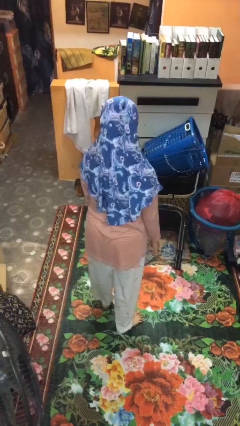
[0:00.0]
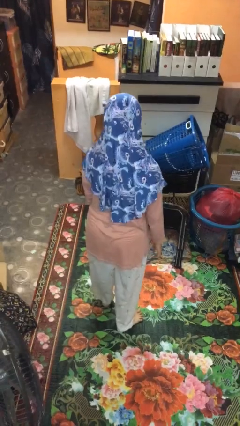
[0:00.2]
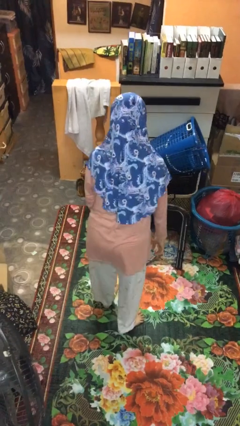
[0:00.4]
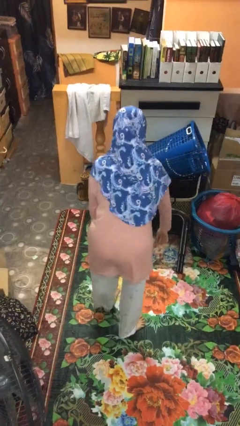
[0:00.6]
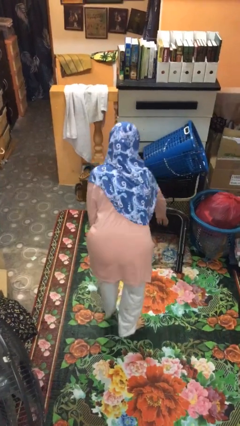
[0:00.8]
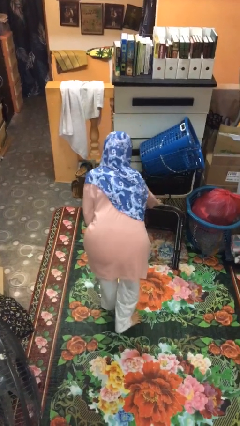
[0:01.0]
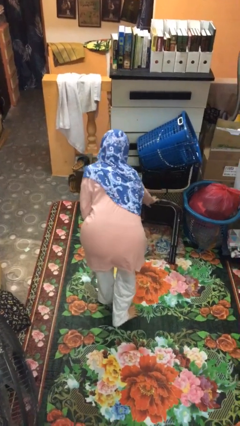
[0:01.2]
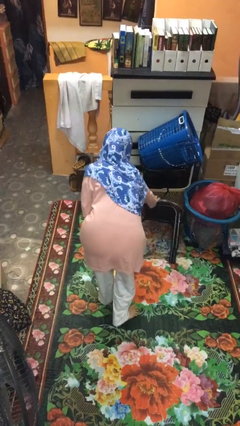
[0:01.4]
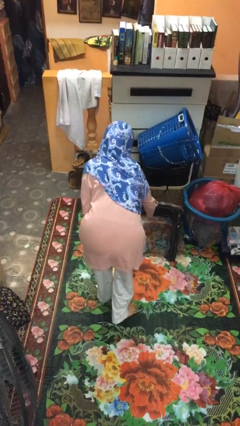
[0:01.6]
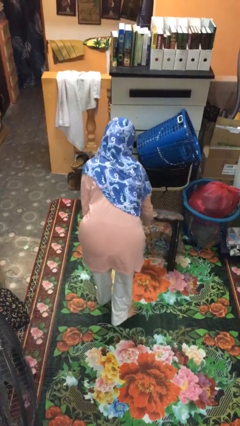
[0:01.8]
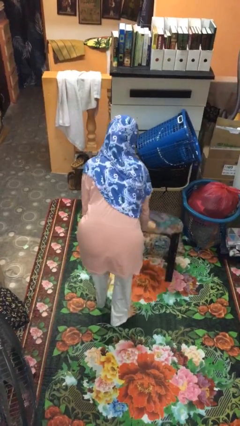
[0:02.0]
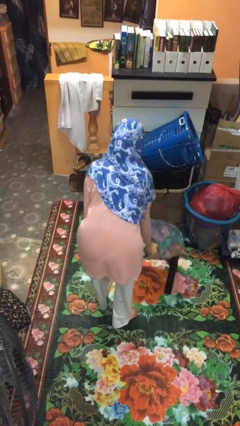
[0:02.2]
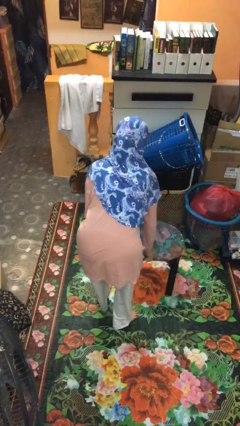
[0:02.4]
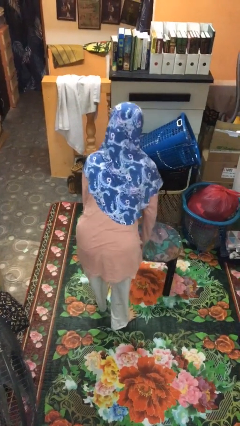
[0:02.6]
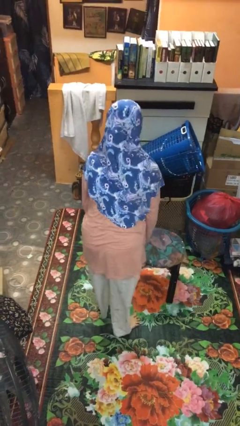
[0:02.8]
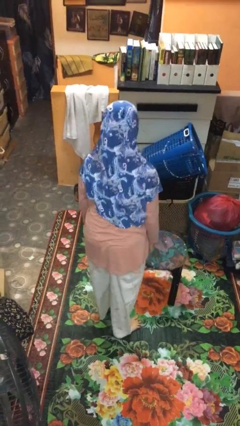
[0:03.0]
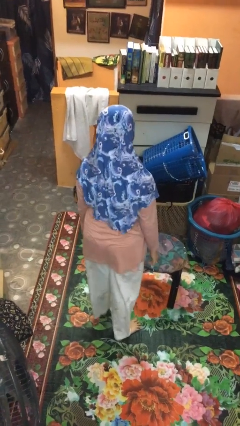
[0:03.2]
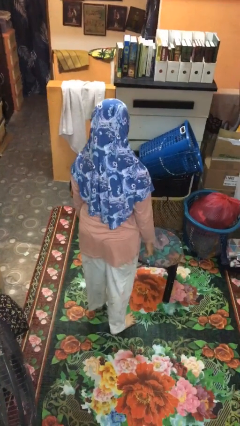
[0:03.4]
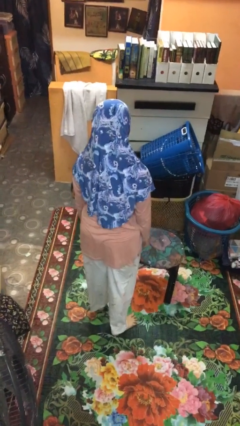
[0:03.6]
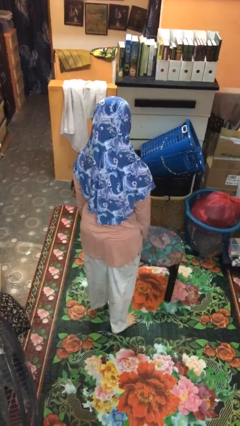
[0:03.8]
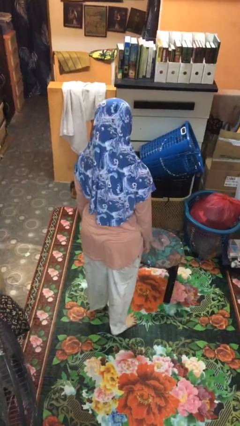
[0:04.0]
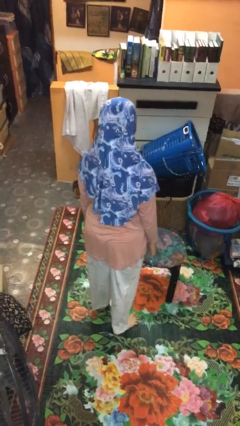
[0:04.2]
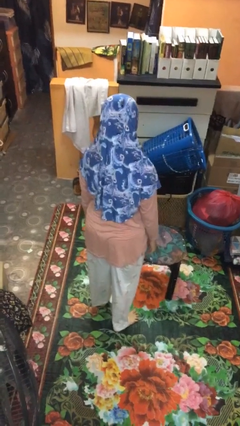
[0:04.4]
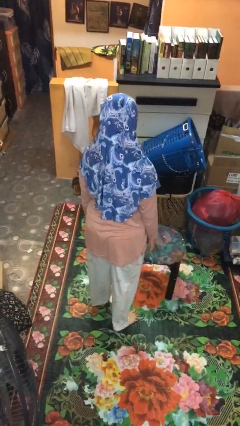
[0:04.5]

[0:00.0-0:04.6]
person sets upright furniture

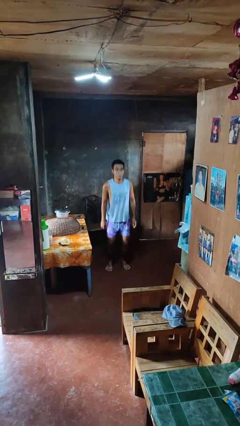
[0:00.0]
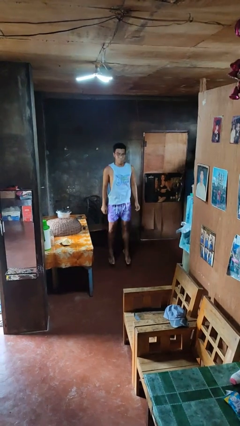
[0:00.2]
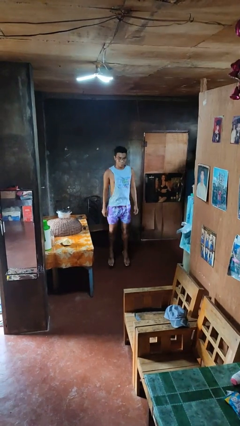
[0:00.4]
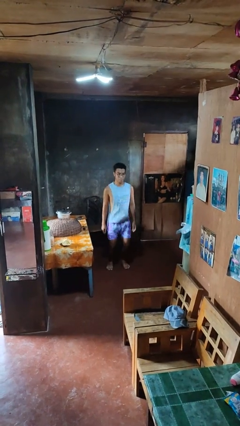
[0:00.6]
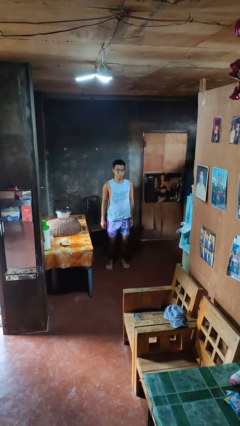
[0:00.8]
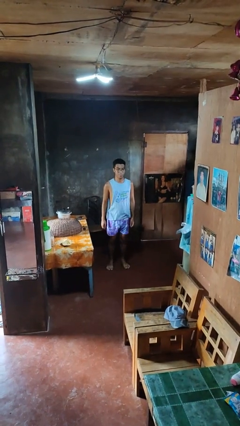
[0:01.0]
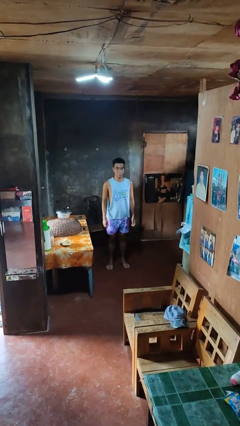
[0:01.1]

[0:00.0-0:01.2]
person jumps

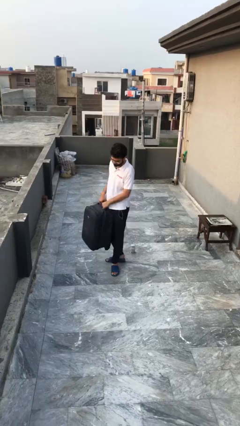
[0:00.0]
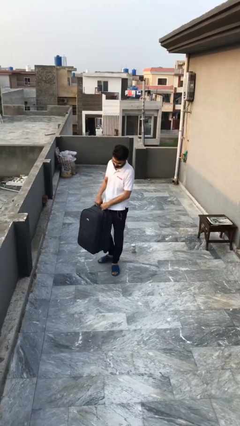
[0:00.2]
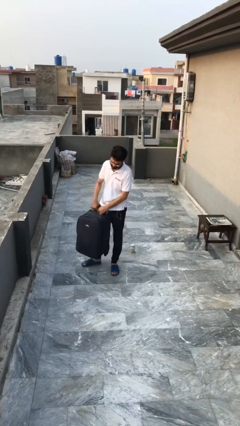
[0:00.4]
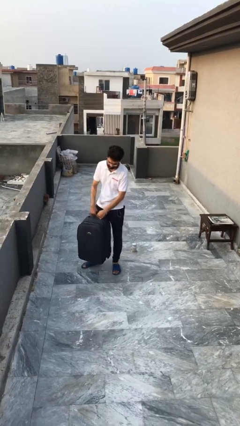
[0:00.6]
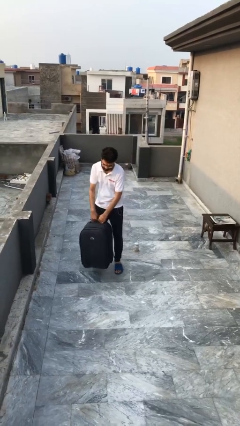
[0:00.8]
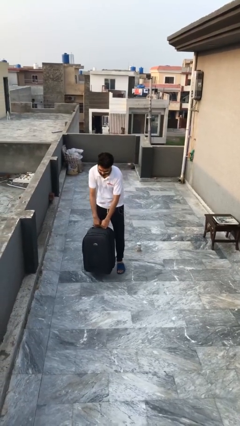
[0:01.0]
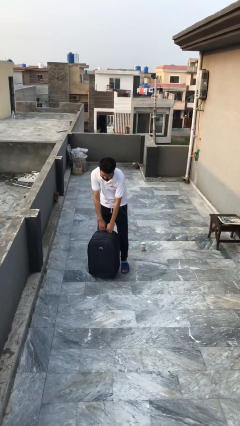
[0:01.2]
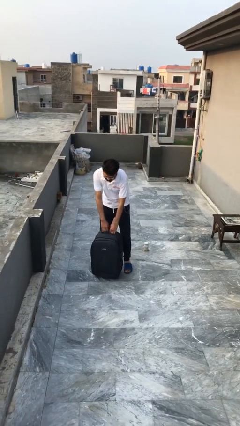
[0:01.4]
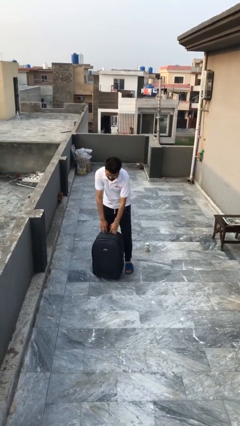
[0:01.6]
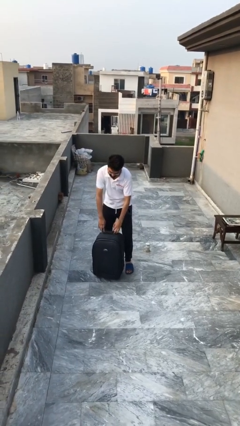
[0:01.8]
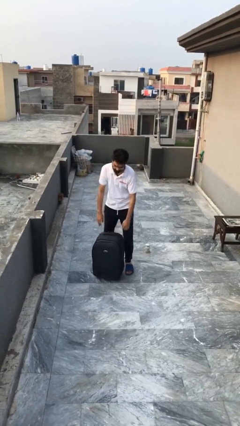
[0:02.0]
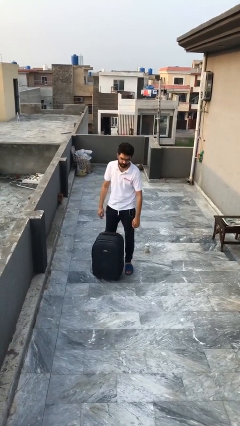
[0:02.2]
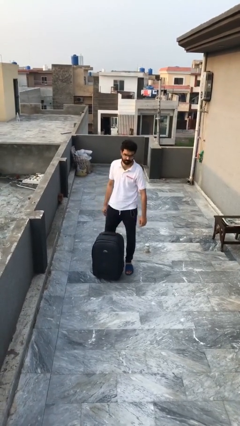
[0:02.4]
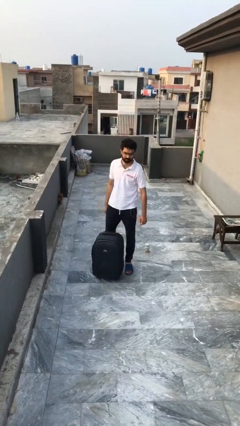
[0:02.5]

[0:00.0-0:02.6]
person puts down object on floor

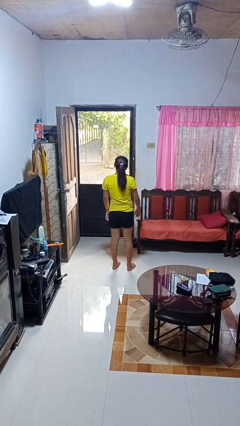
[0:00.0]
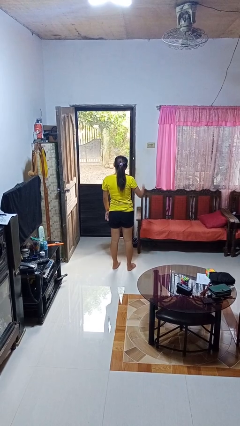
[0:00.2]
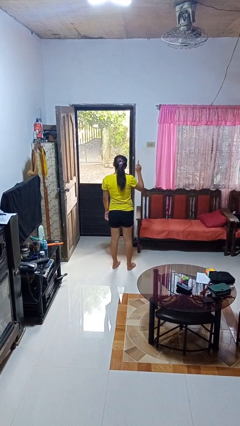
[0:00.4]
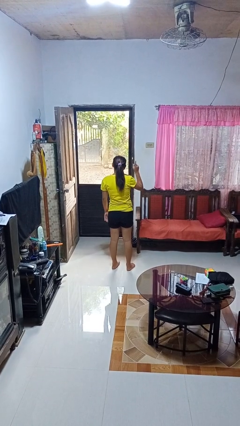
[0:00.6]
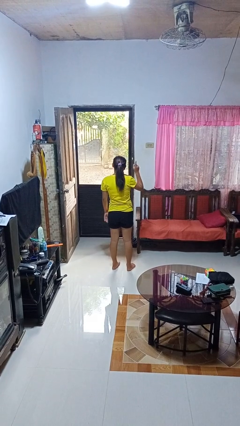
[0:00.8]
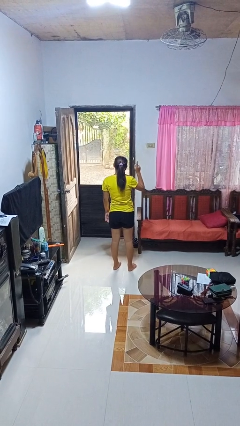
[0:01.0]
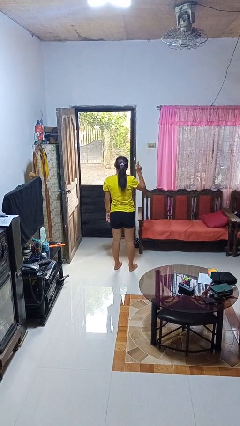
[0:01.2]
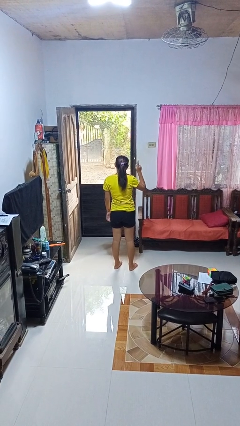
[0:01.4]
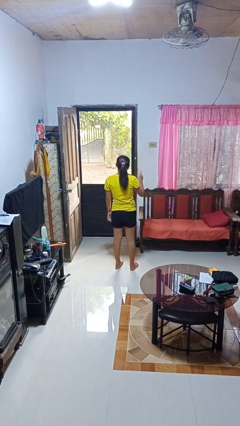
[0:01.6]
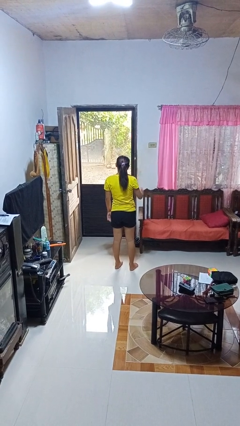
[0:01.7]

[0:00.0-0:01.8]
person gestures number one

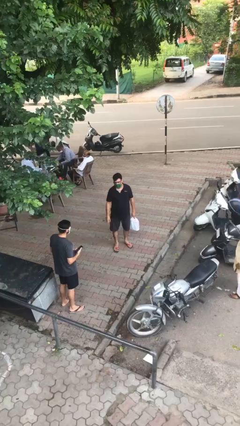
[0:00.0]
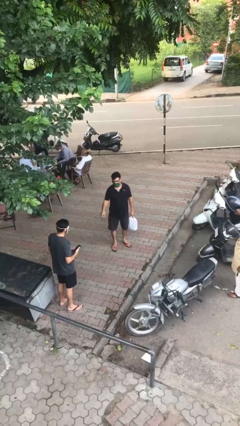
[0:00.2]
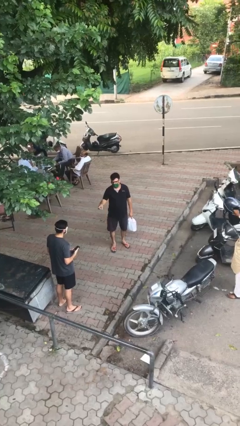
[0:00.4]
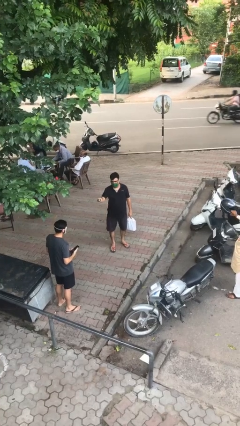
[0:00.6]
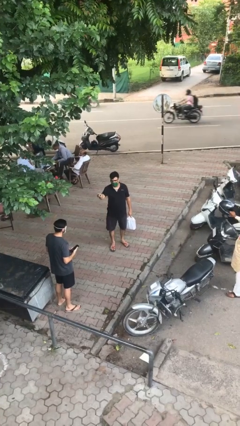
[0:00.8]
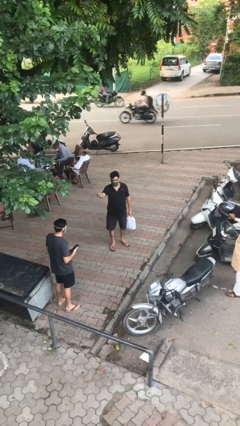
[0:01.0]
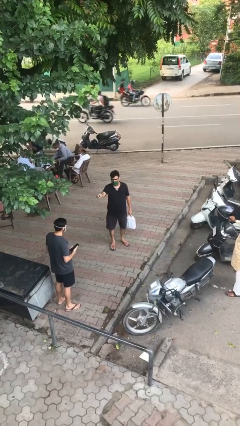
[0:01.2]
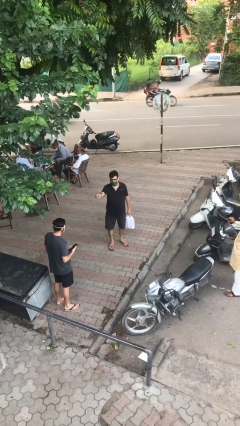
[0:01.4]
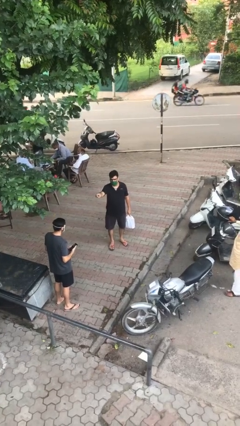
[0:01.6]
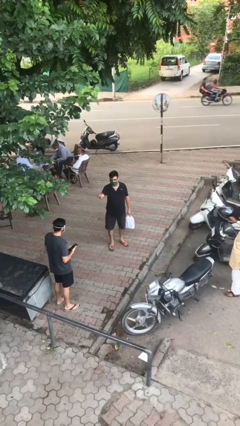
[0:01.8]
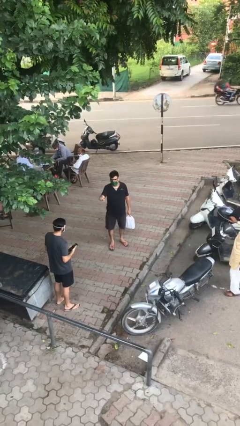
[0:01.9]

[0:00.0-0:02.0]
person points at person

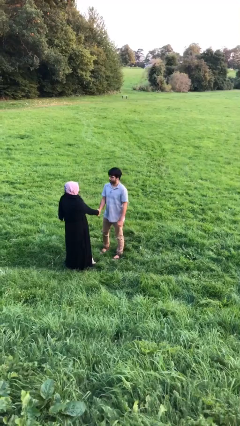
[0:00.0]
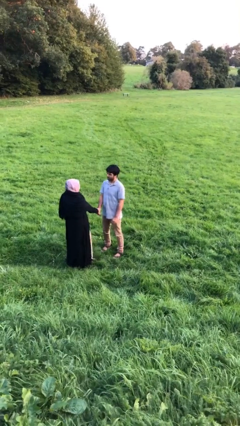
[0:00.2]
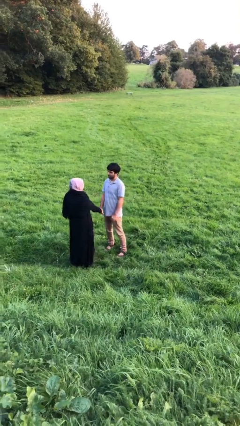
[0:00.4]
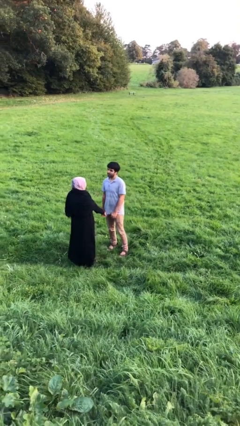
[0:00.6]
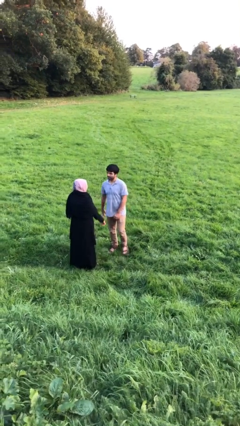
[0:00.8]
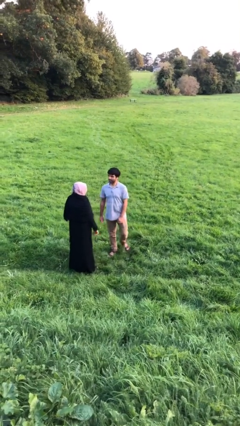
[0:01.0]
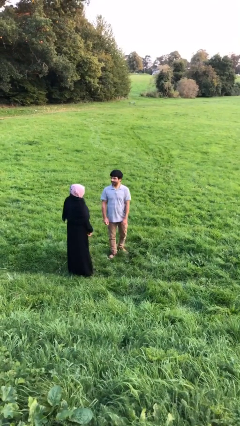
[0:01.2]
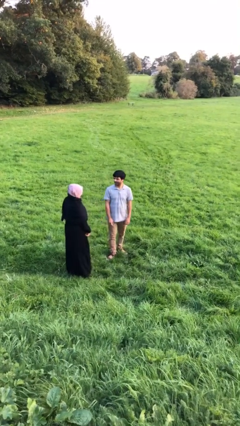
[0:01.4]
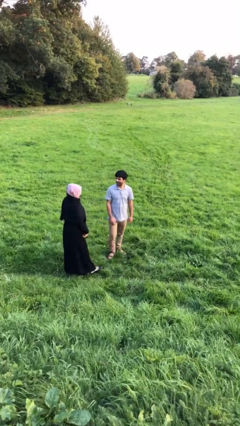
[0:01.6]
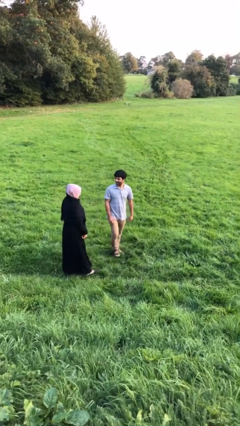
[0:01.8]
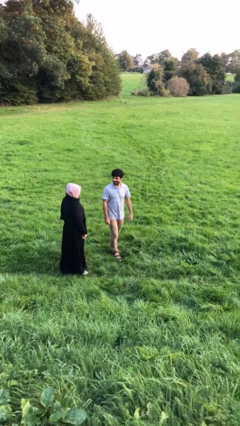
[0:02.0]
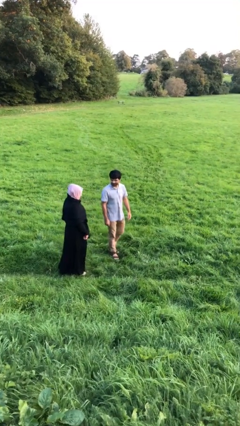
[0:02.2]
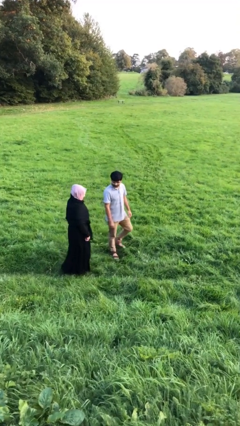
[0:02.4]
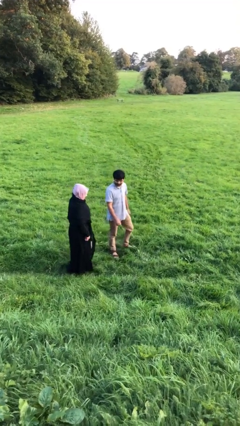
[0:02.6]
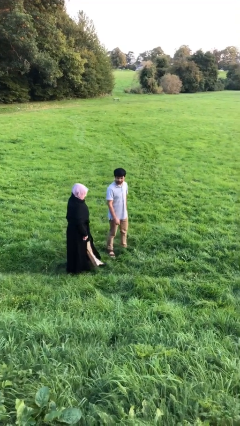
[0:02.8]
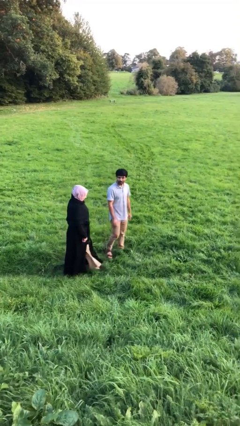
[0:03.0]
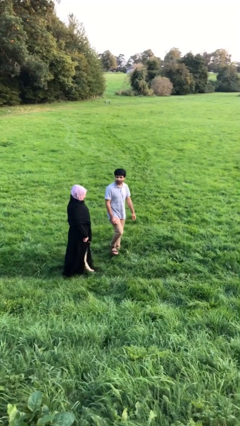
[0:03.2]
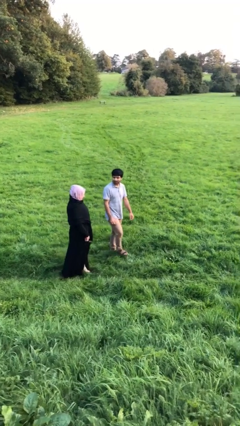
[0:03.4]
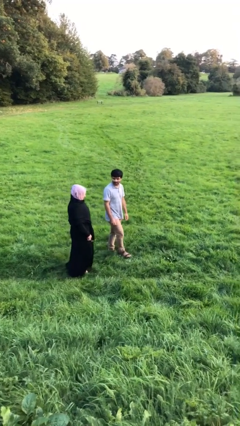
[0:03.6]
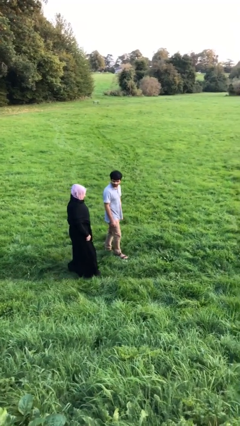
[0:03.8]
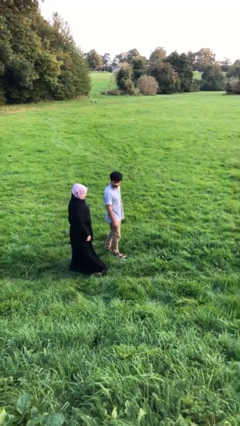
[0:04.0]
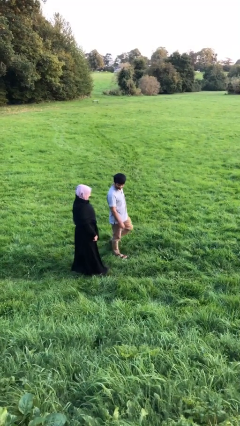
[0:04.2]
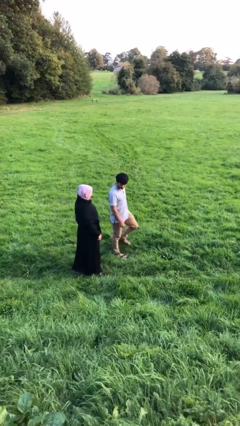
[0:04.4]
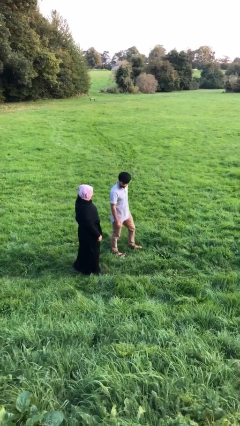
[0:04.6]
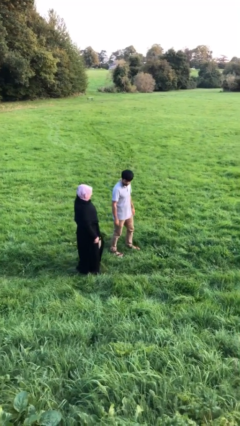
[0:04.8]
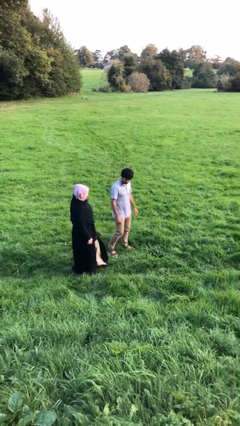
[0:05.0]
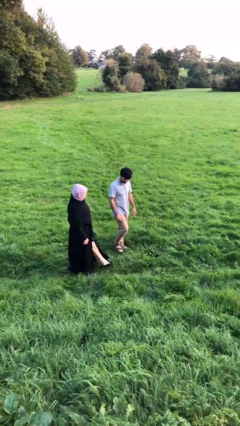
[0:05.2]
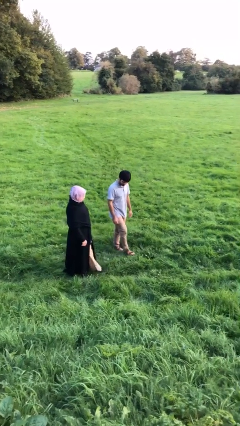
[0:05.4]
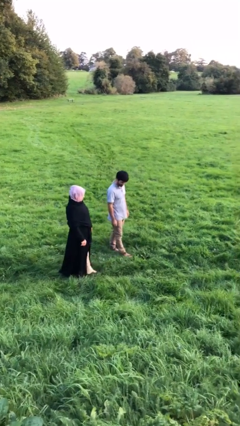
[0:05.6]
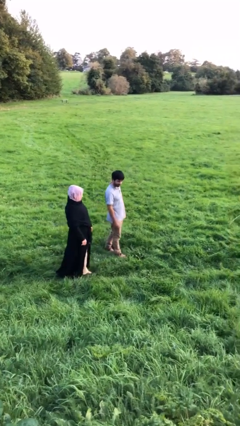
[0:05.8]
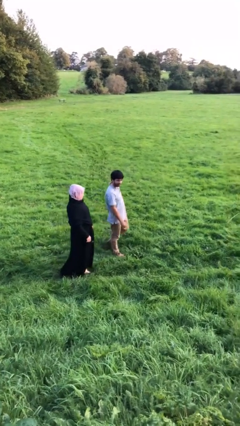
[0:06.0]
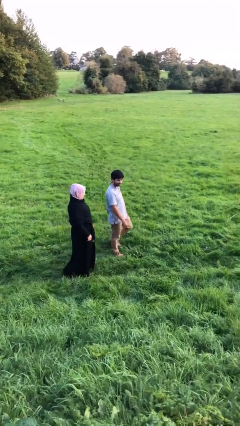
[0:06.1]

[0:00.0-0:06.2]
person talks to person
